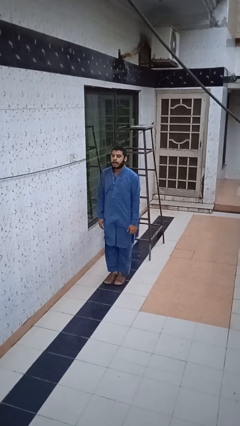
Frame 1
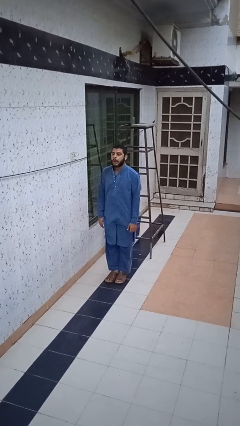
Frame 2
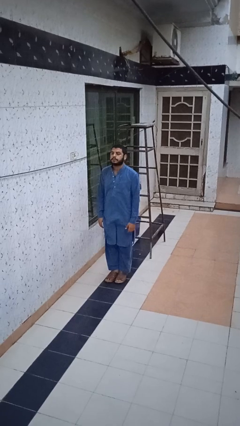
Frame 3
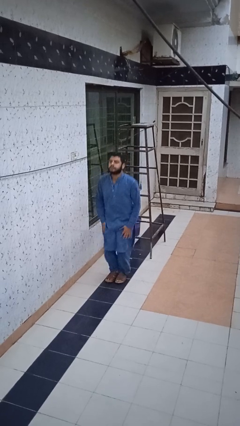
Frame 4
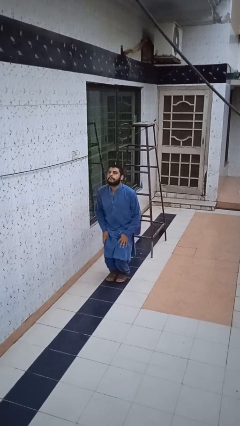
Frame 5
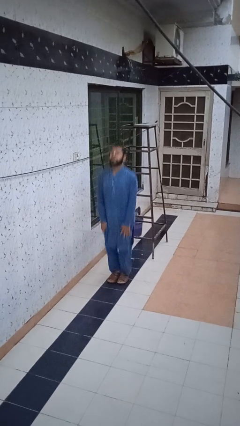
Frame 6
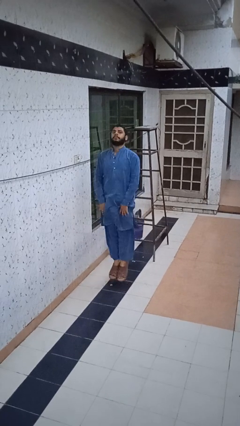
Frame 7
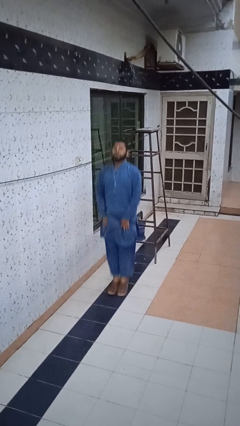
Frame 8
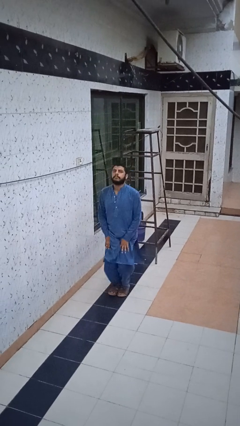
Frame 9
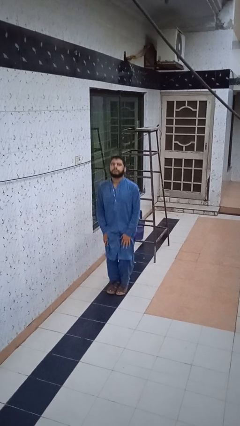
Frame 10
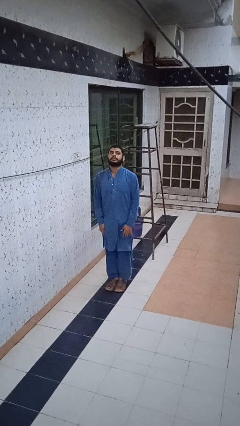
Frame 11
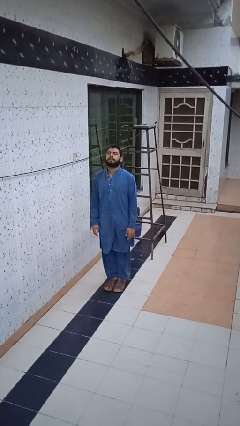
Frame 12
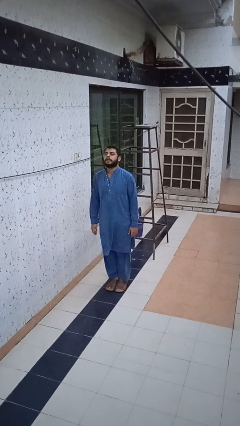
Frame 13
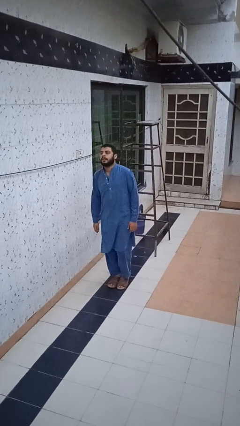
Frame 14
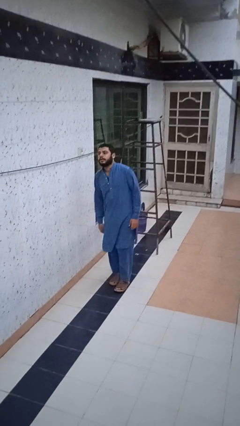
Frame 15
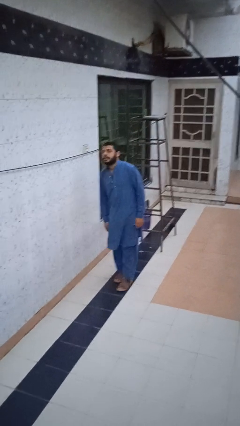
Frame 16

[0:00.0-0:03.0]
person jumps

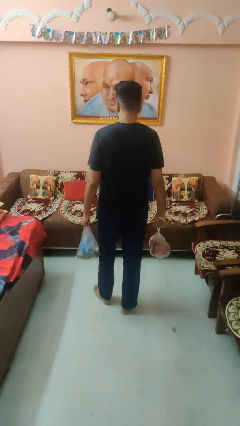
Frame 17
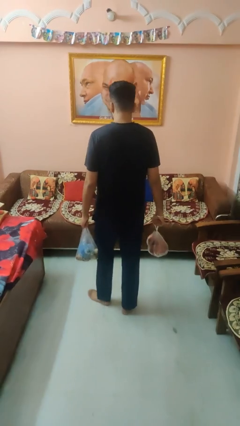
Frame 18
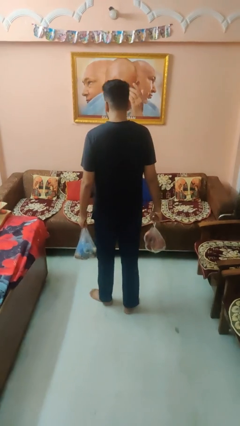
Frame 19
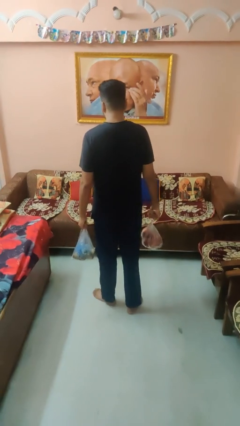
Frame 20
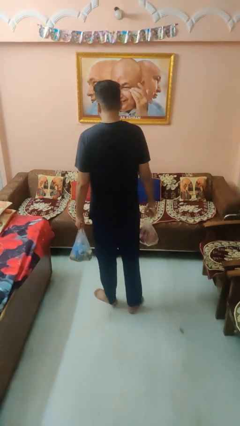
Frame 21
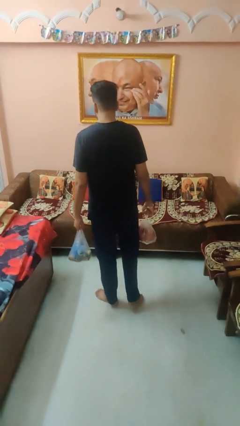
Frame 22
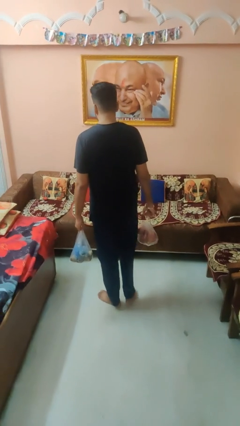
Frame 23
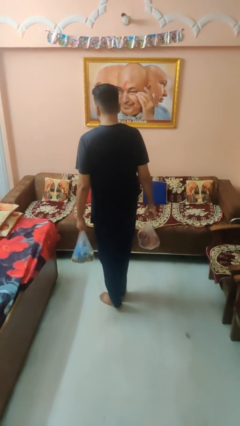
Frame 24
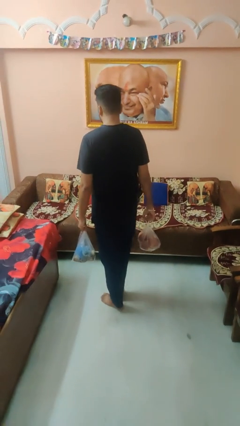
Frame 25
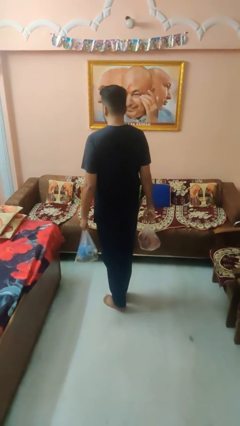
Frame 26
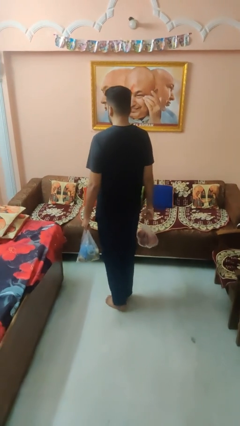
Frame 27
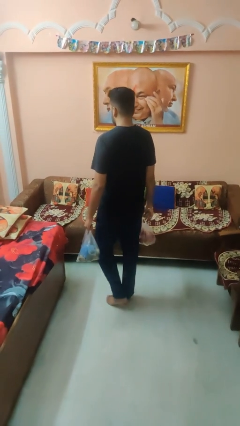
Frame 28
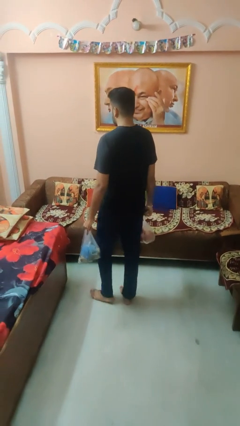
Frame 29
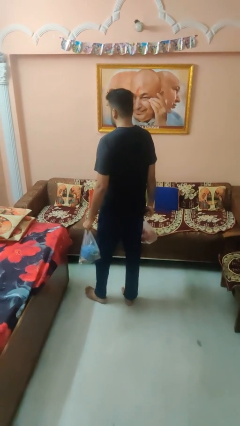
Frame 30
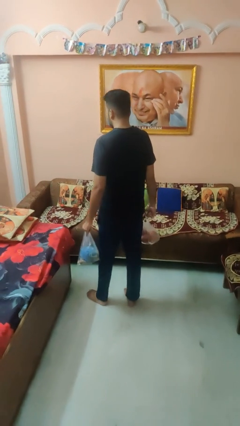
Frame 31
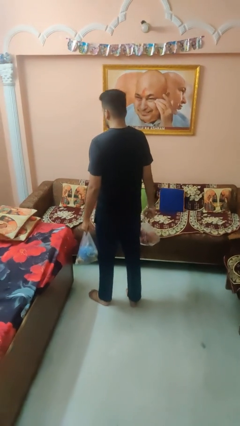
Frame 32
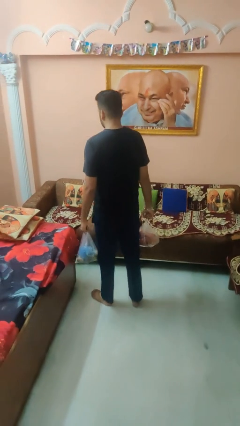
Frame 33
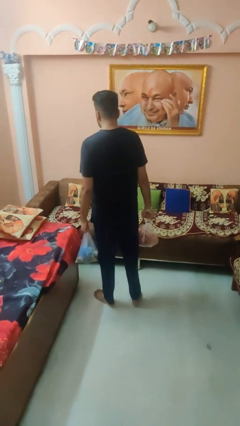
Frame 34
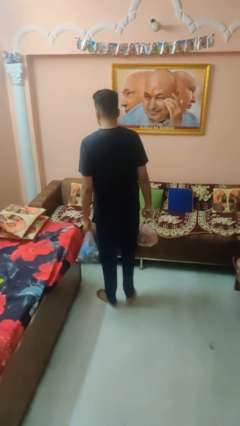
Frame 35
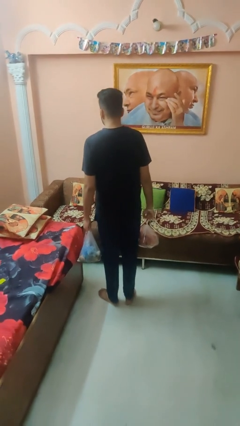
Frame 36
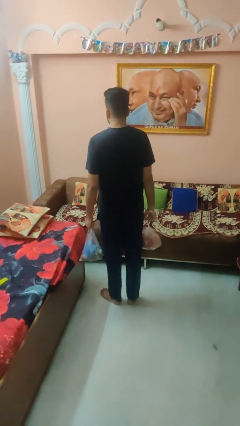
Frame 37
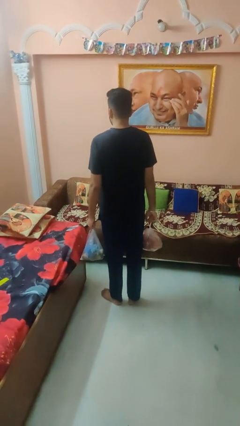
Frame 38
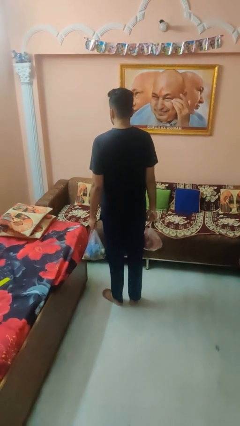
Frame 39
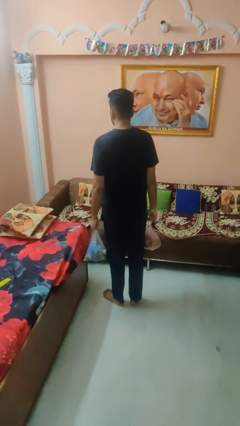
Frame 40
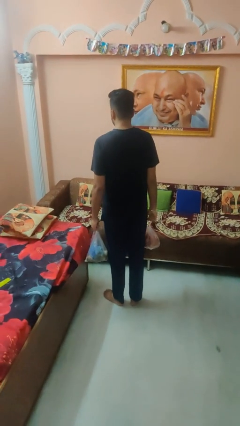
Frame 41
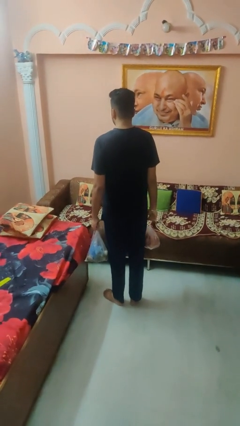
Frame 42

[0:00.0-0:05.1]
person carries groceries

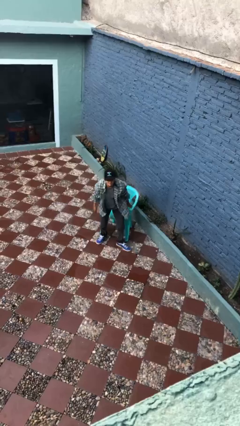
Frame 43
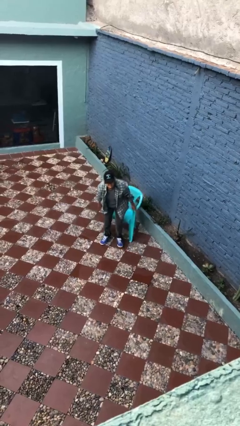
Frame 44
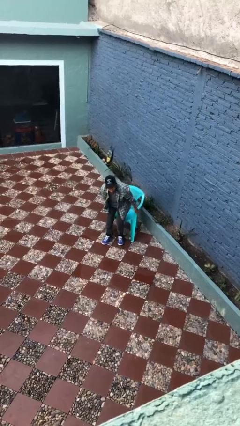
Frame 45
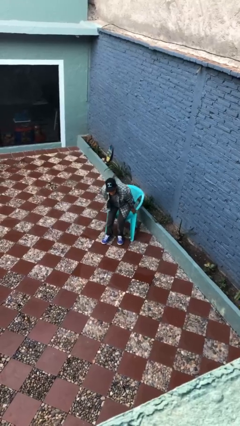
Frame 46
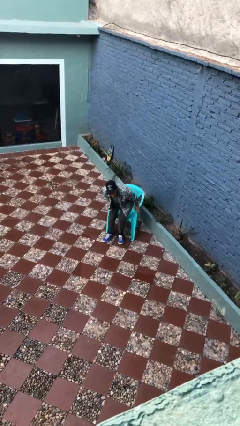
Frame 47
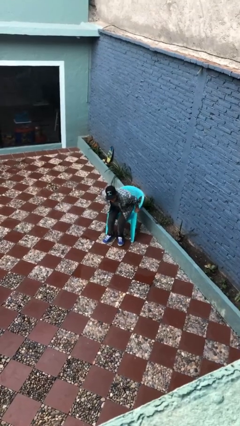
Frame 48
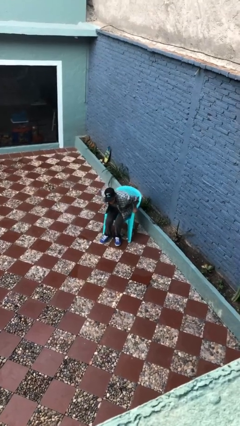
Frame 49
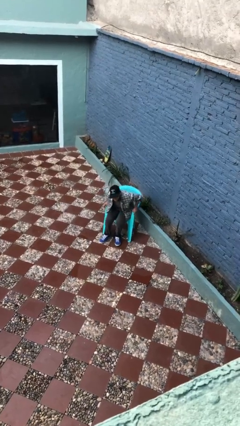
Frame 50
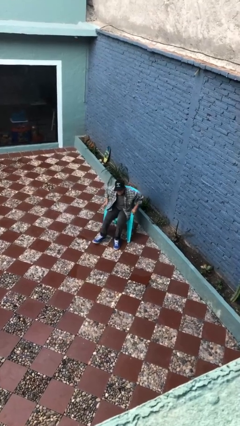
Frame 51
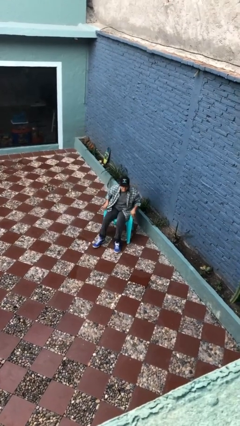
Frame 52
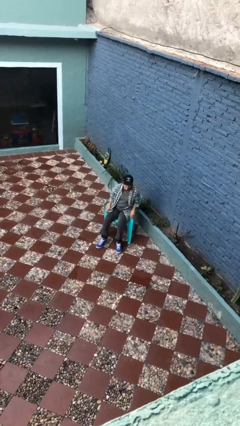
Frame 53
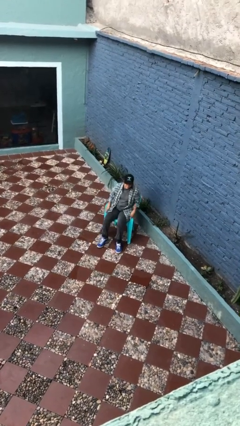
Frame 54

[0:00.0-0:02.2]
person sits down

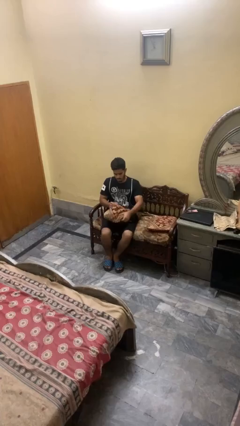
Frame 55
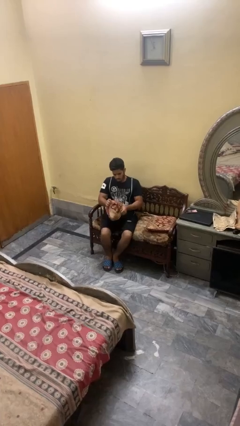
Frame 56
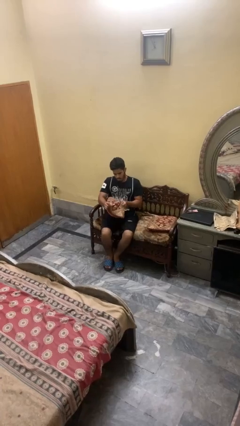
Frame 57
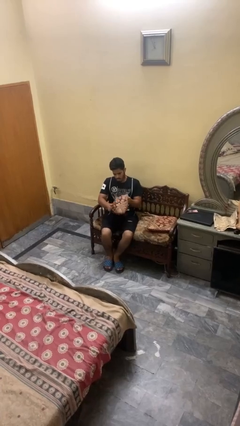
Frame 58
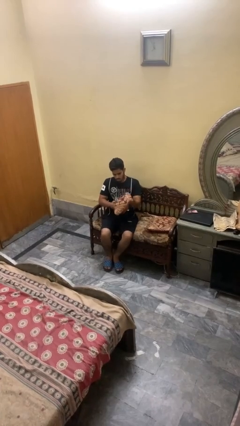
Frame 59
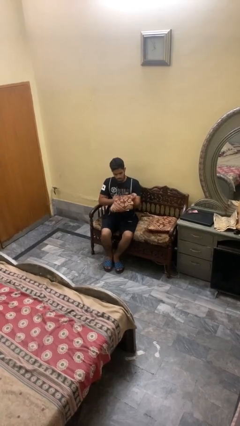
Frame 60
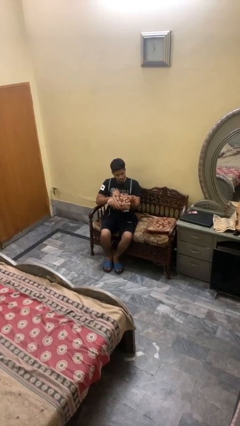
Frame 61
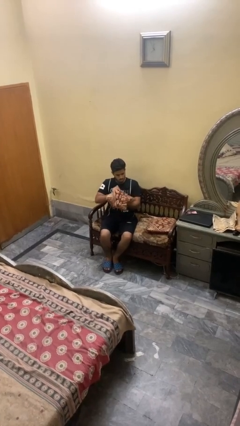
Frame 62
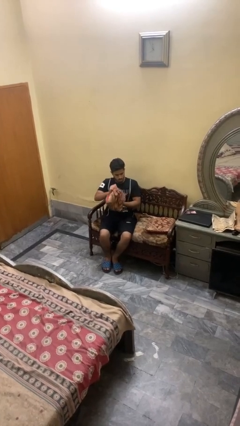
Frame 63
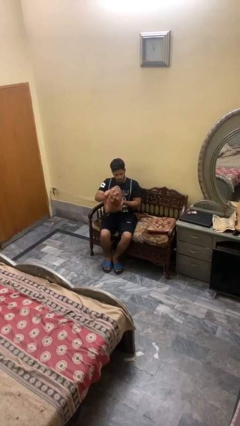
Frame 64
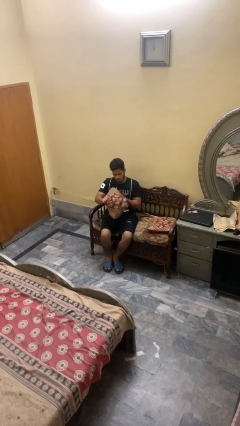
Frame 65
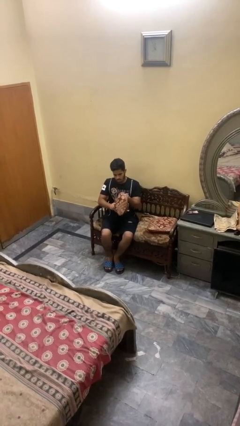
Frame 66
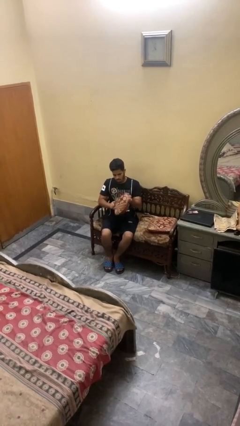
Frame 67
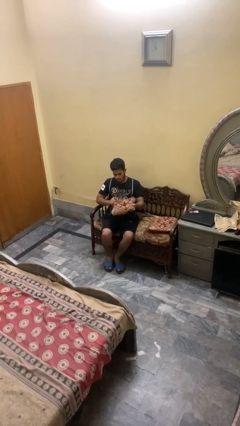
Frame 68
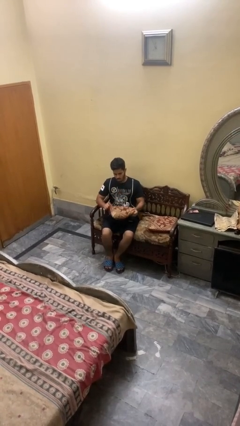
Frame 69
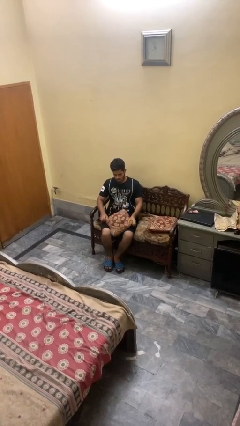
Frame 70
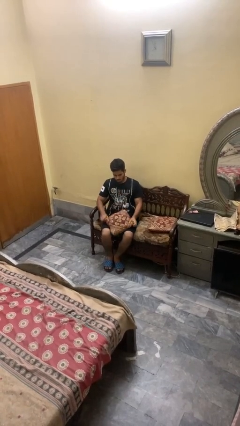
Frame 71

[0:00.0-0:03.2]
person squeezes object

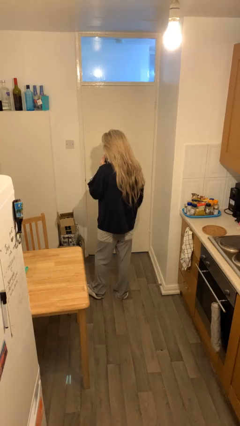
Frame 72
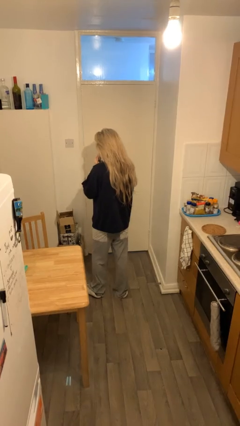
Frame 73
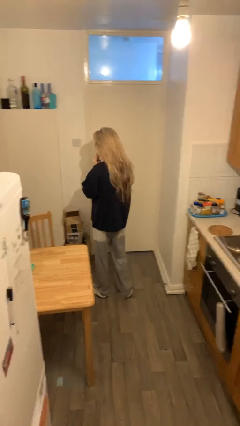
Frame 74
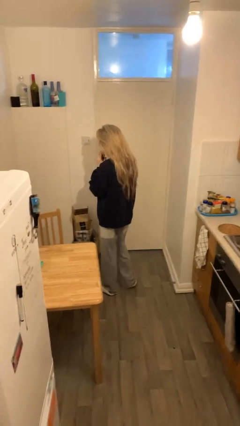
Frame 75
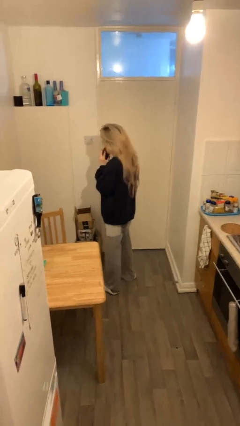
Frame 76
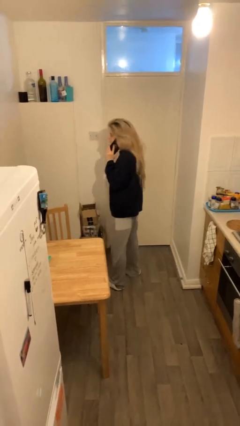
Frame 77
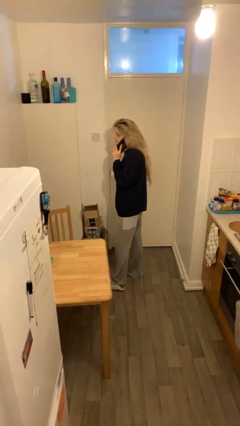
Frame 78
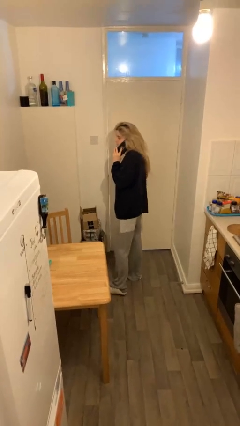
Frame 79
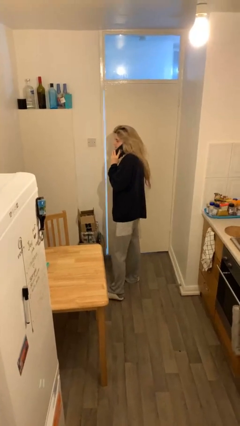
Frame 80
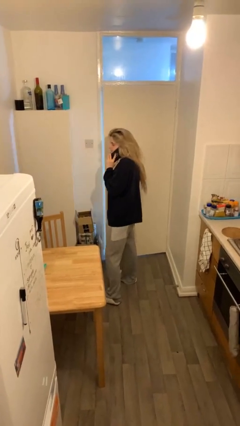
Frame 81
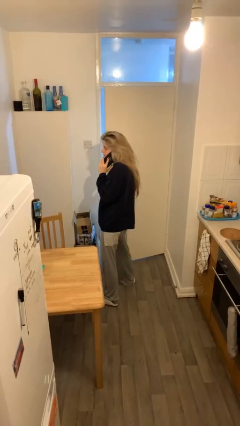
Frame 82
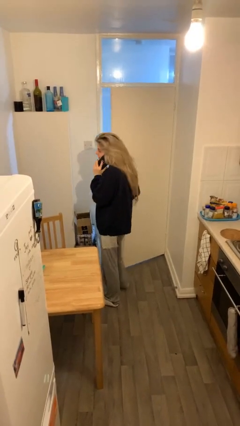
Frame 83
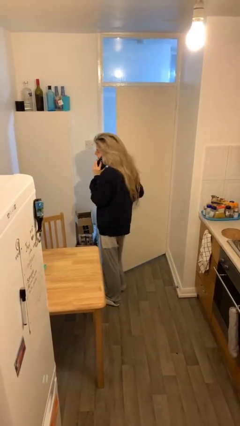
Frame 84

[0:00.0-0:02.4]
person opens facility door

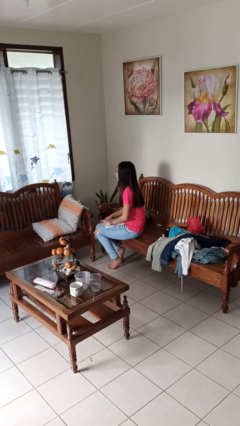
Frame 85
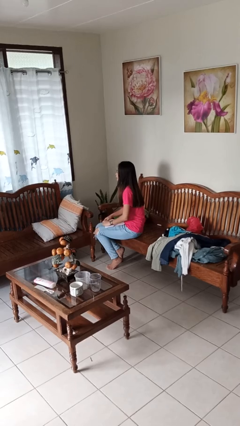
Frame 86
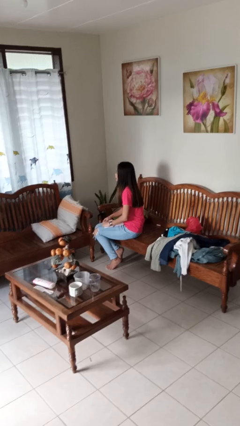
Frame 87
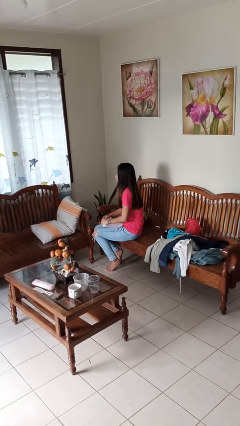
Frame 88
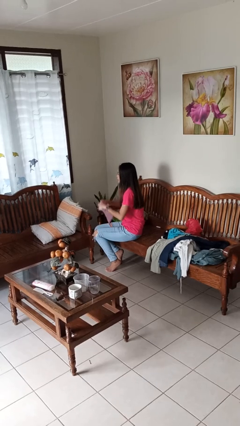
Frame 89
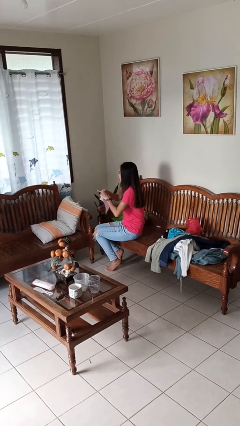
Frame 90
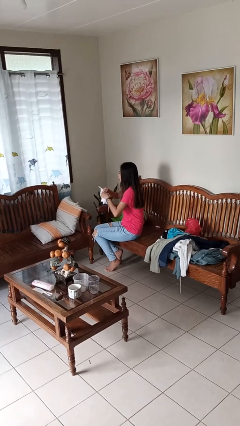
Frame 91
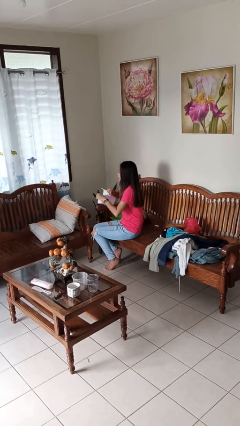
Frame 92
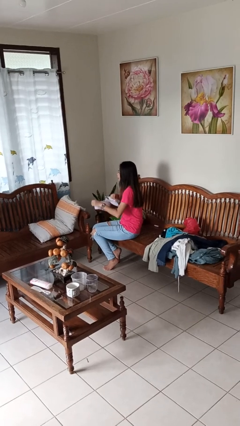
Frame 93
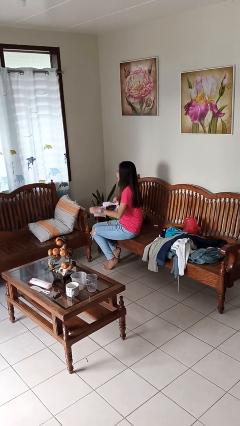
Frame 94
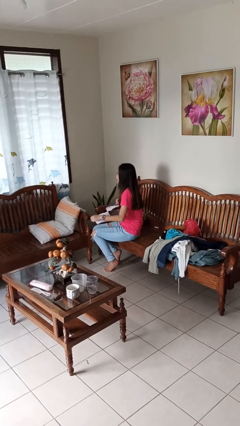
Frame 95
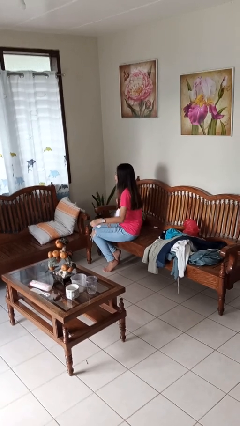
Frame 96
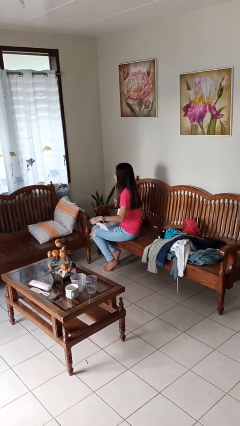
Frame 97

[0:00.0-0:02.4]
person tears paper
